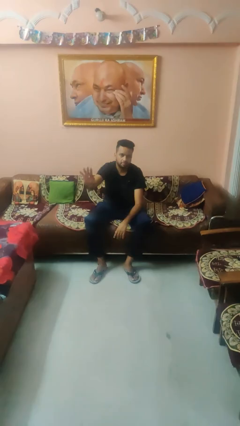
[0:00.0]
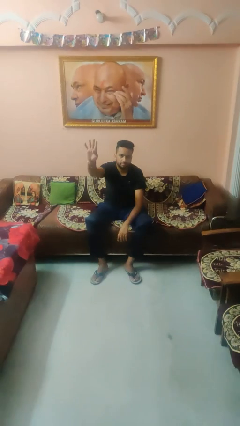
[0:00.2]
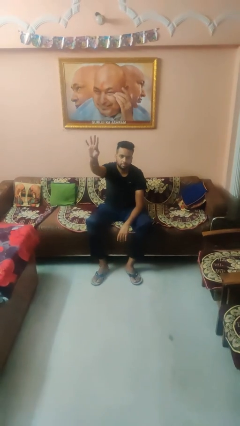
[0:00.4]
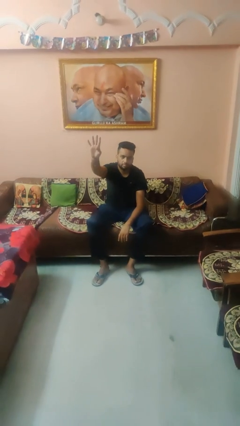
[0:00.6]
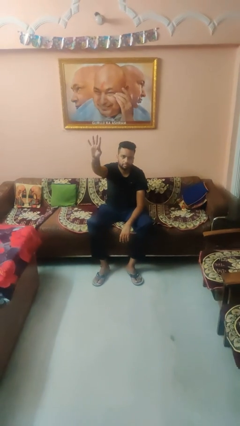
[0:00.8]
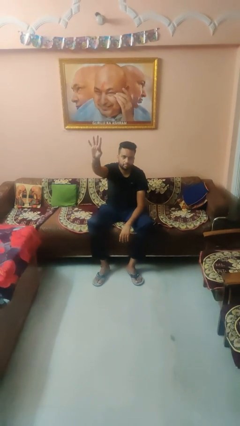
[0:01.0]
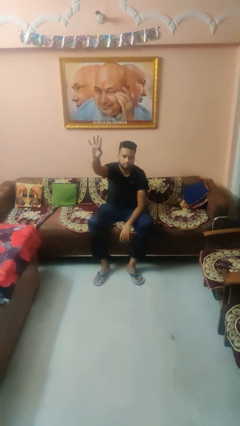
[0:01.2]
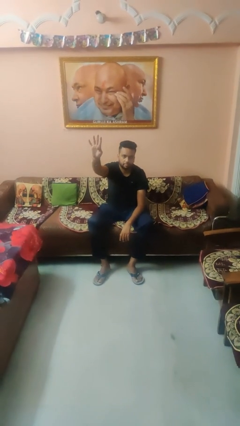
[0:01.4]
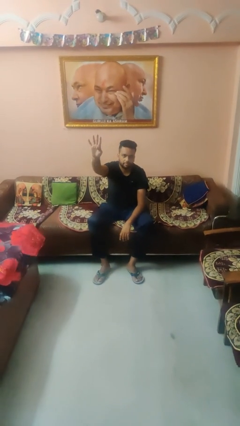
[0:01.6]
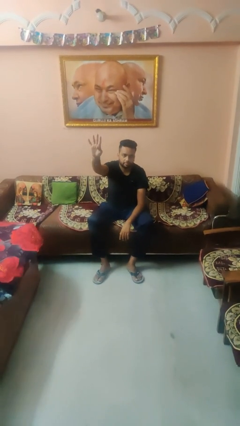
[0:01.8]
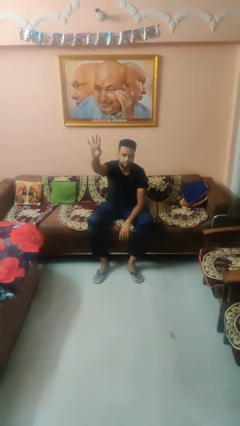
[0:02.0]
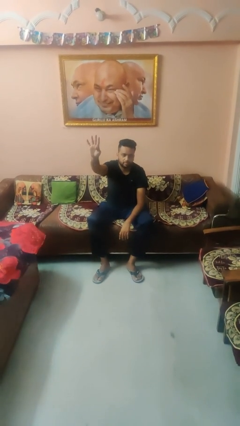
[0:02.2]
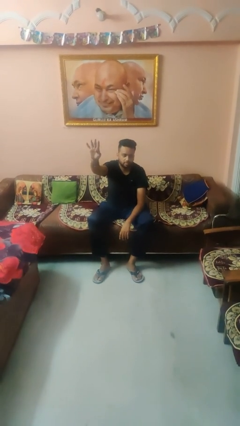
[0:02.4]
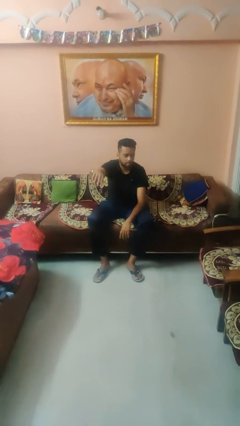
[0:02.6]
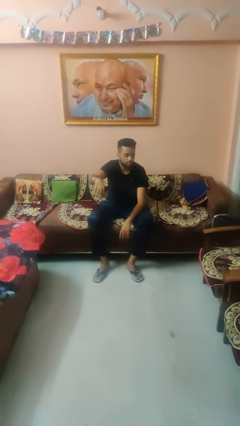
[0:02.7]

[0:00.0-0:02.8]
person gestures number four

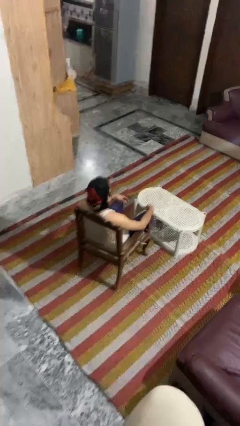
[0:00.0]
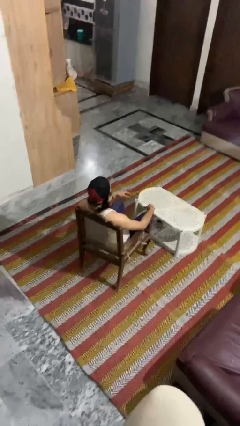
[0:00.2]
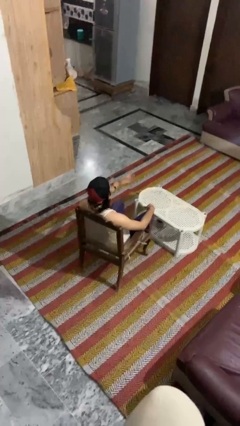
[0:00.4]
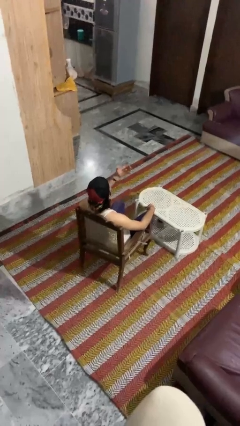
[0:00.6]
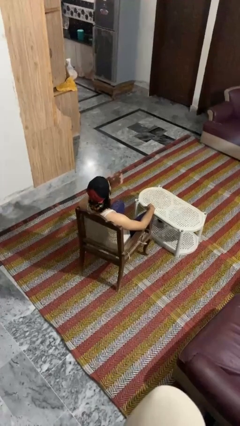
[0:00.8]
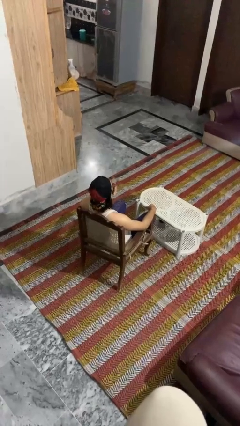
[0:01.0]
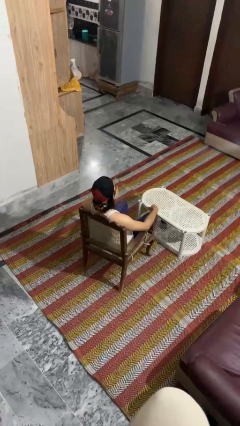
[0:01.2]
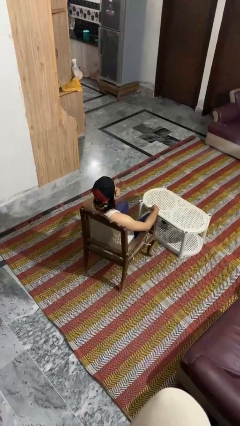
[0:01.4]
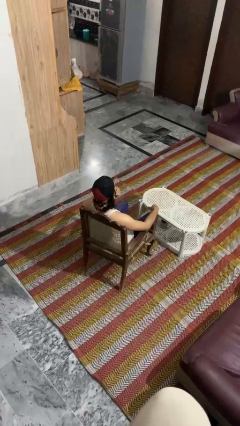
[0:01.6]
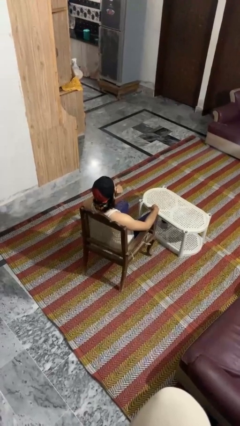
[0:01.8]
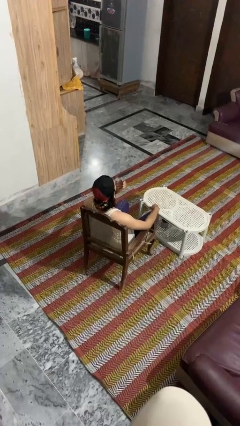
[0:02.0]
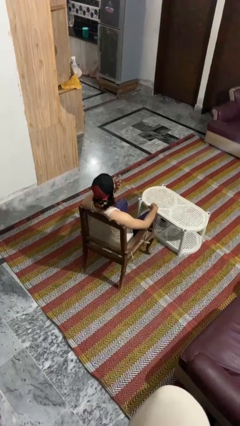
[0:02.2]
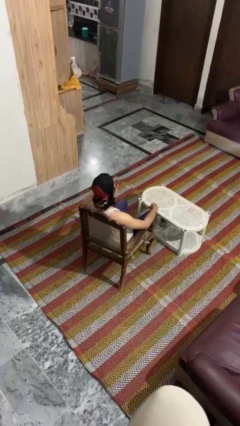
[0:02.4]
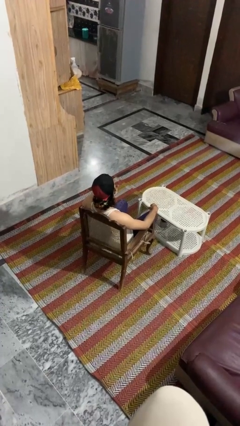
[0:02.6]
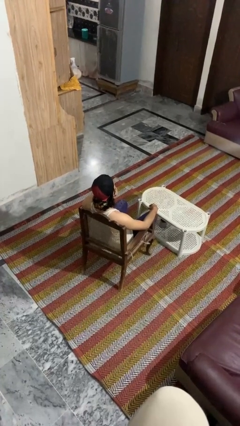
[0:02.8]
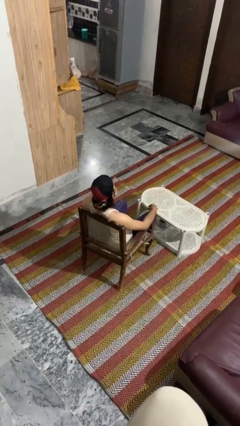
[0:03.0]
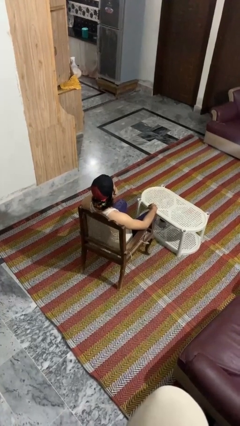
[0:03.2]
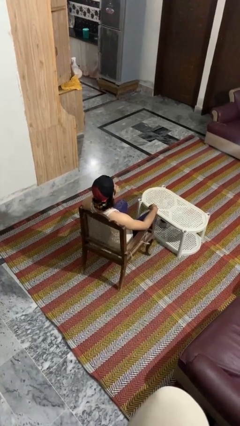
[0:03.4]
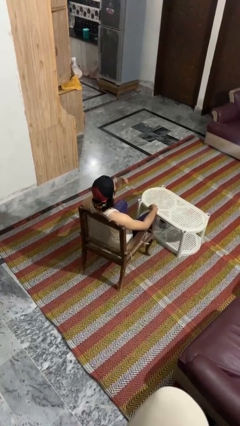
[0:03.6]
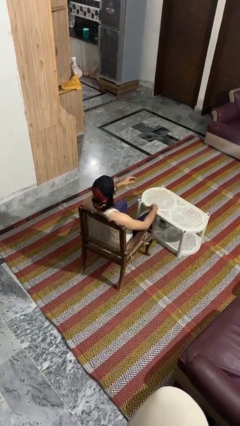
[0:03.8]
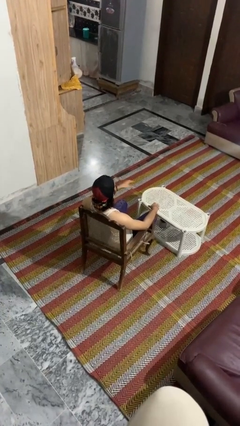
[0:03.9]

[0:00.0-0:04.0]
person strokes chin

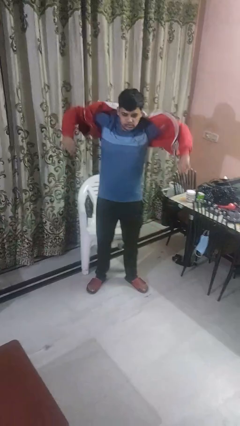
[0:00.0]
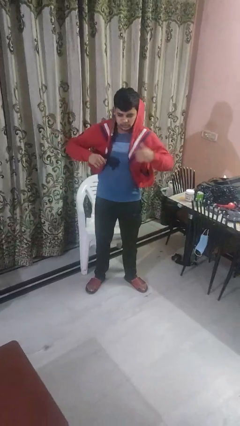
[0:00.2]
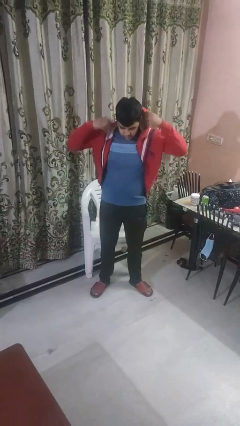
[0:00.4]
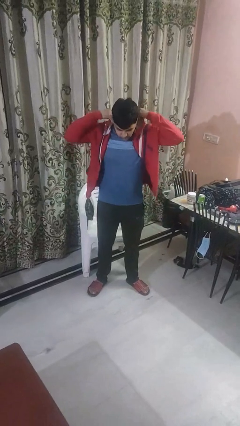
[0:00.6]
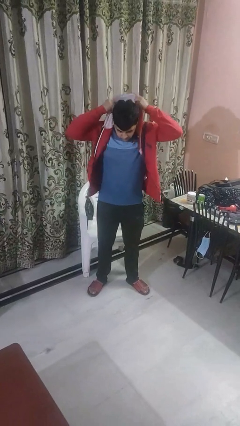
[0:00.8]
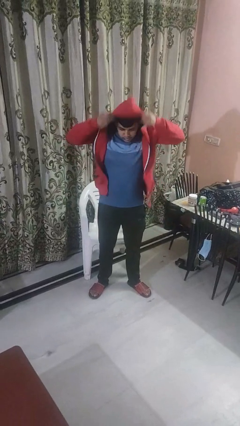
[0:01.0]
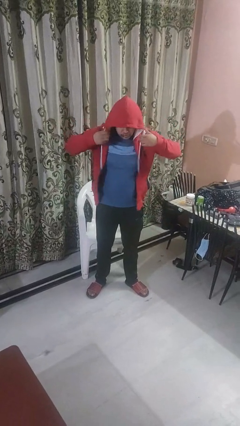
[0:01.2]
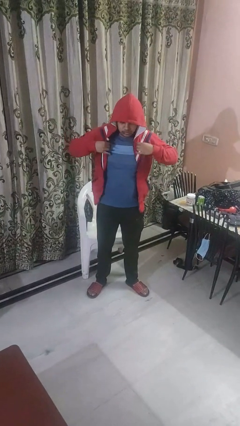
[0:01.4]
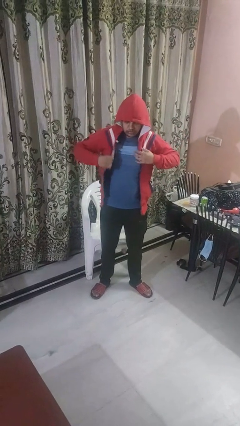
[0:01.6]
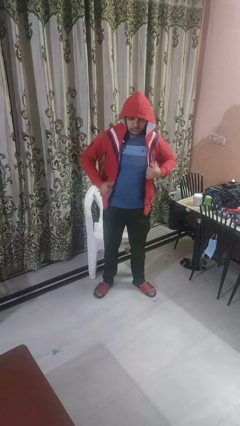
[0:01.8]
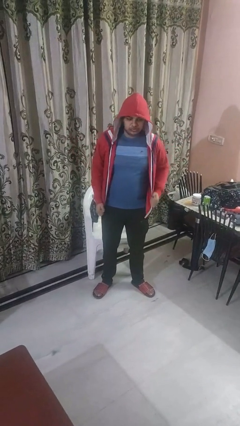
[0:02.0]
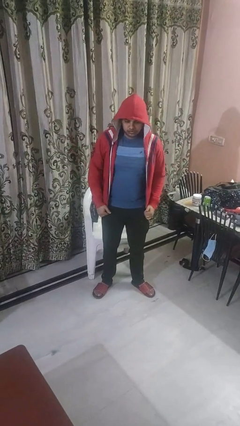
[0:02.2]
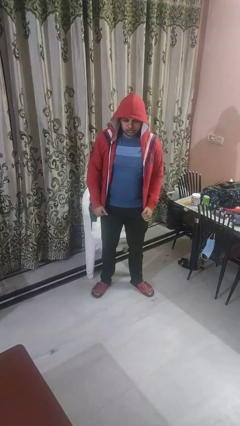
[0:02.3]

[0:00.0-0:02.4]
person puts on hoodie

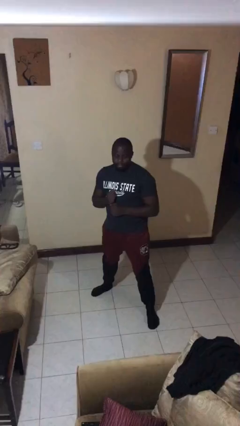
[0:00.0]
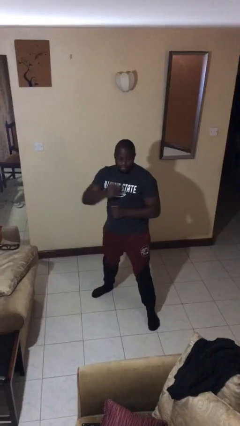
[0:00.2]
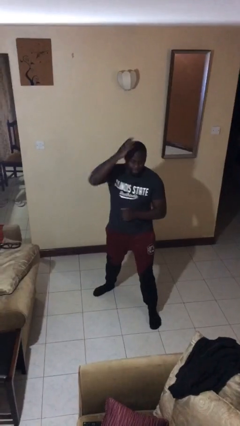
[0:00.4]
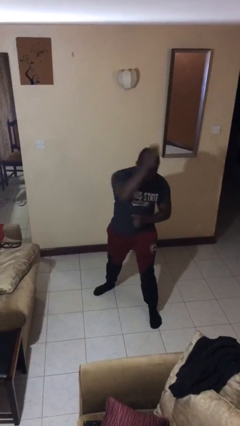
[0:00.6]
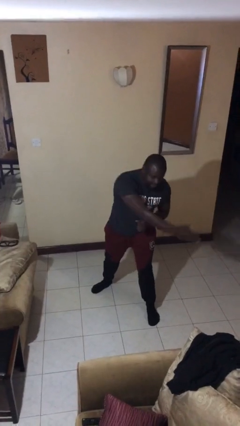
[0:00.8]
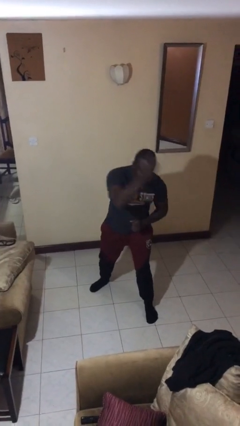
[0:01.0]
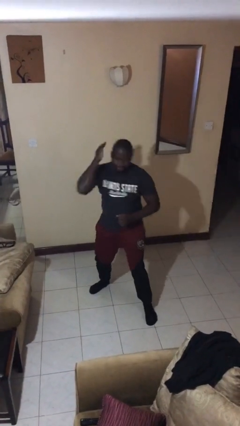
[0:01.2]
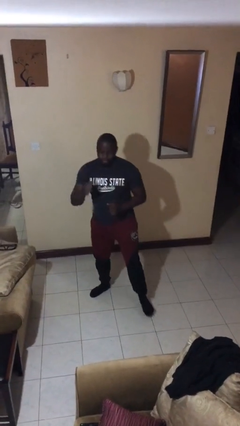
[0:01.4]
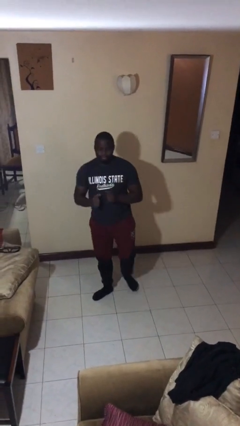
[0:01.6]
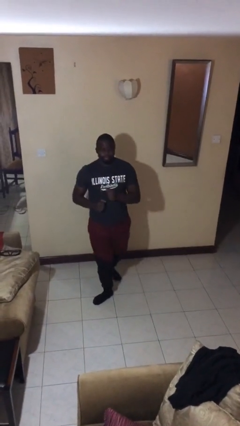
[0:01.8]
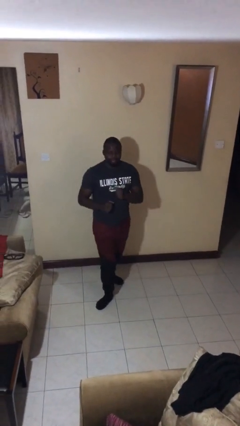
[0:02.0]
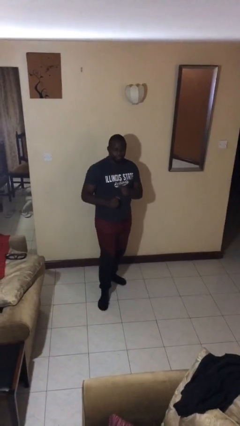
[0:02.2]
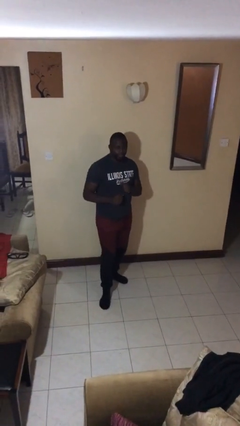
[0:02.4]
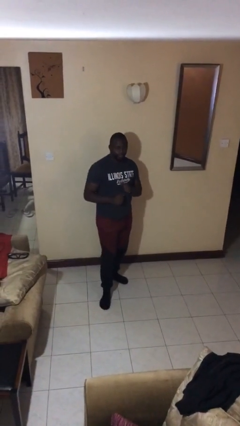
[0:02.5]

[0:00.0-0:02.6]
person karate chop

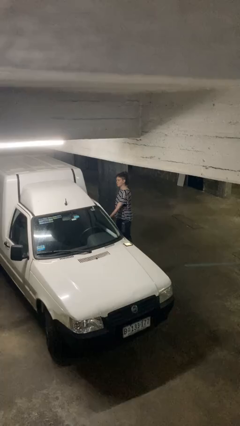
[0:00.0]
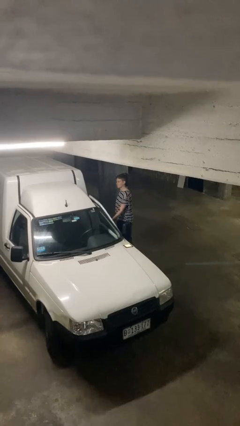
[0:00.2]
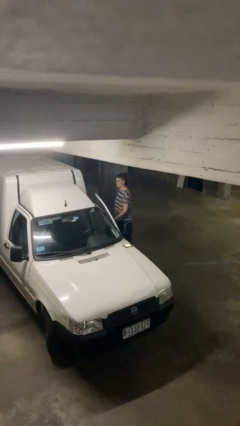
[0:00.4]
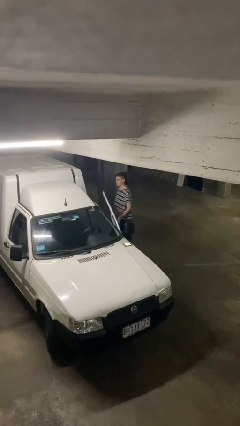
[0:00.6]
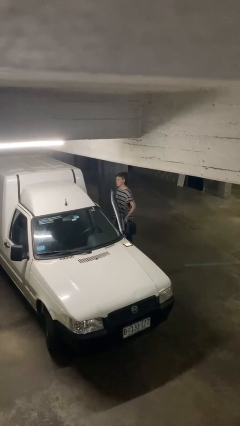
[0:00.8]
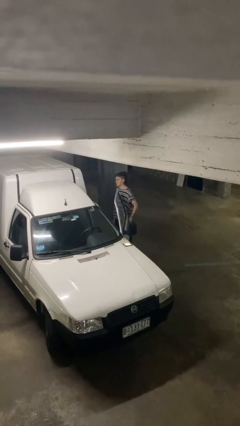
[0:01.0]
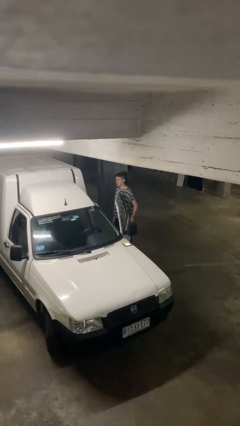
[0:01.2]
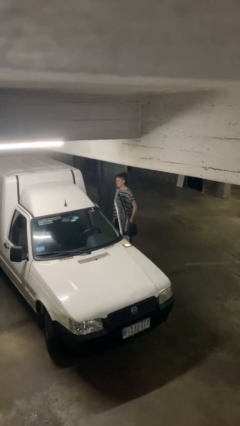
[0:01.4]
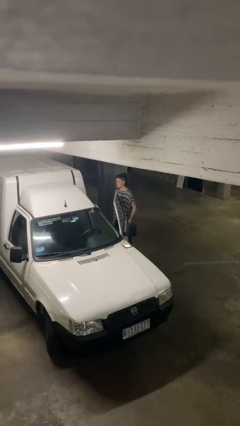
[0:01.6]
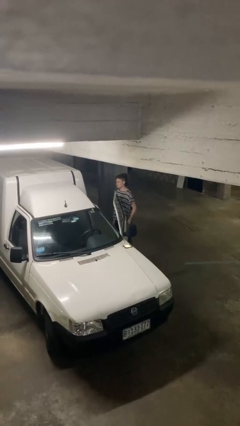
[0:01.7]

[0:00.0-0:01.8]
person opens car door

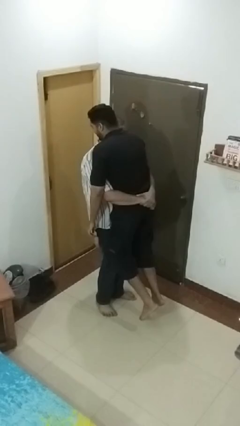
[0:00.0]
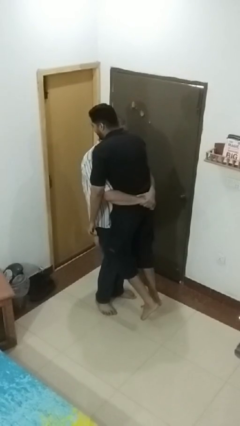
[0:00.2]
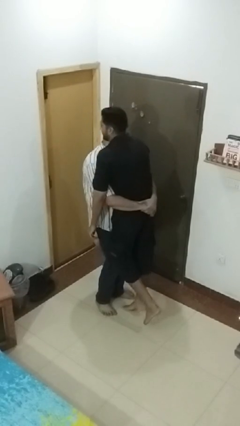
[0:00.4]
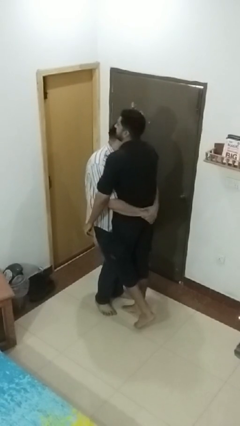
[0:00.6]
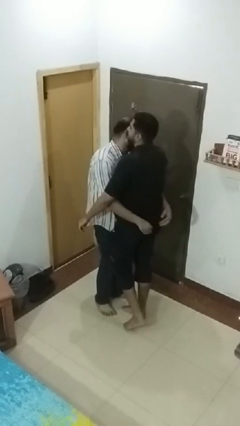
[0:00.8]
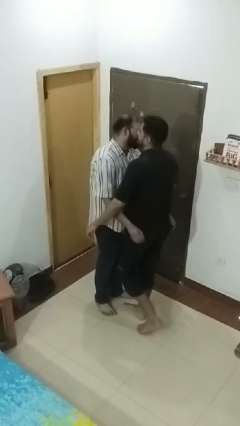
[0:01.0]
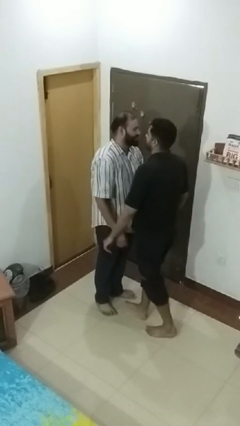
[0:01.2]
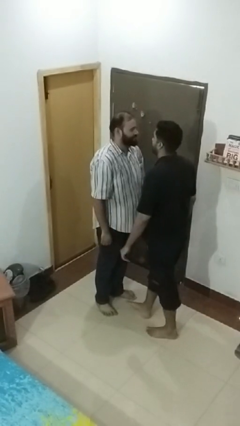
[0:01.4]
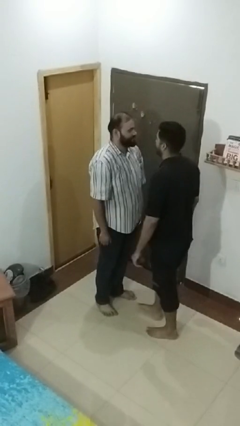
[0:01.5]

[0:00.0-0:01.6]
person puts down person

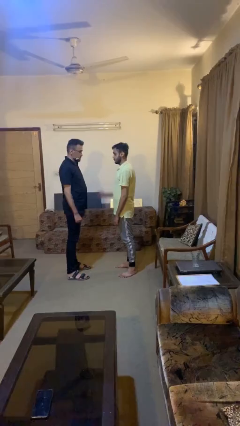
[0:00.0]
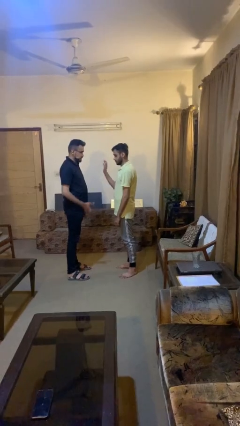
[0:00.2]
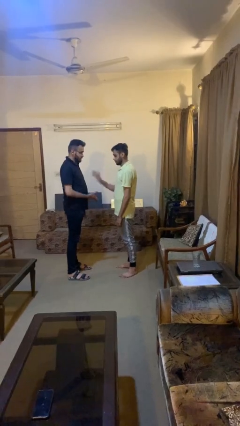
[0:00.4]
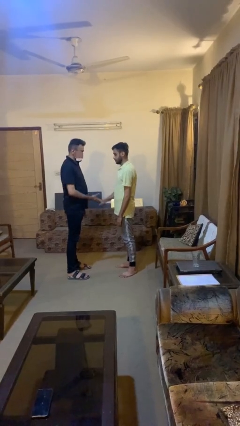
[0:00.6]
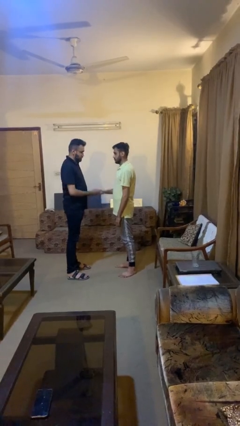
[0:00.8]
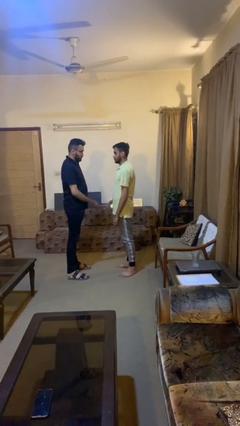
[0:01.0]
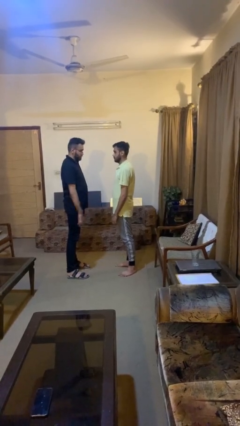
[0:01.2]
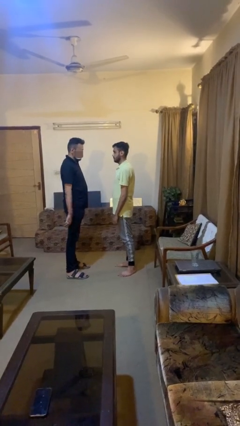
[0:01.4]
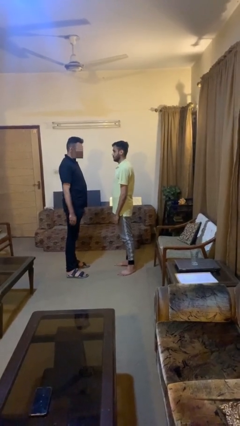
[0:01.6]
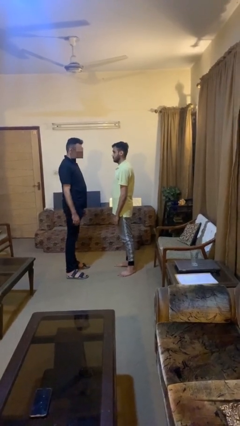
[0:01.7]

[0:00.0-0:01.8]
person highfives hand

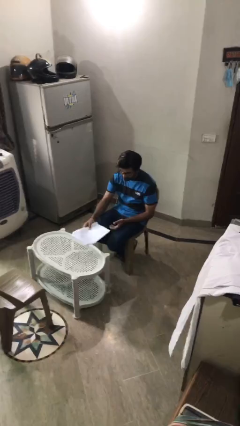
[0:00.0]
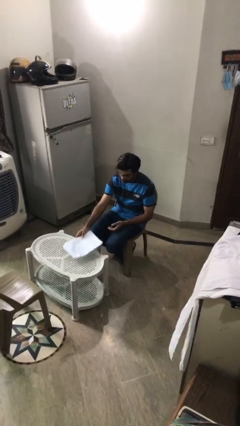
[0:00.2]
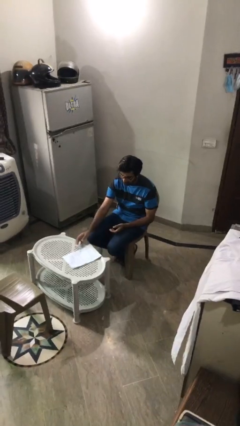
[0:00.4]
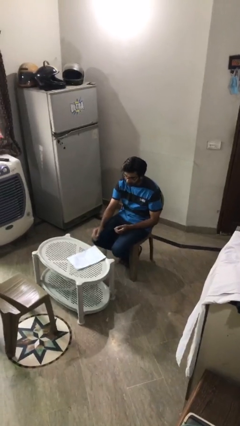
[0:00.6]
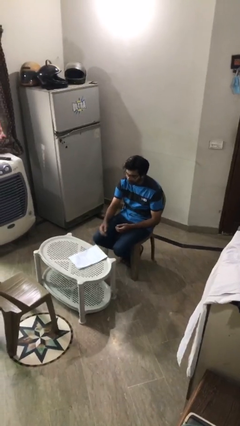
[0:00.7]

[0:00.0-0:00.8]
person puts down object on table
